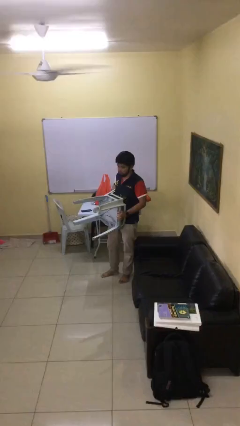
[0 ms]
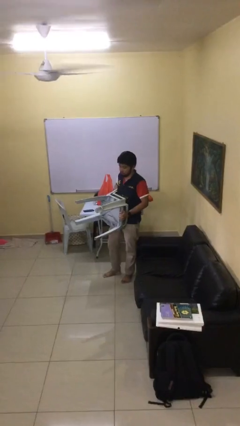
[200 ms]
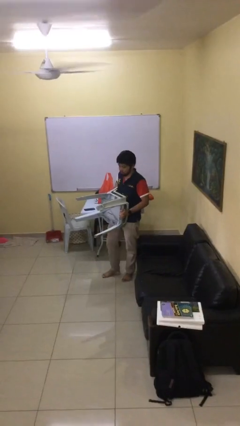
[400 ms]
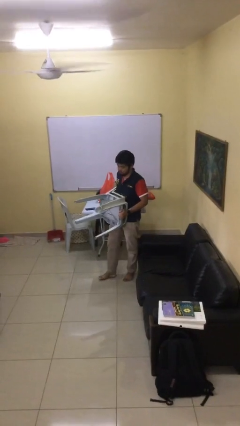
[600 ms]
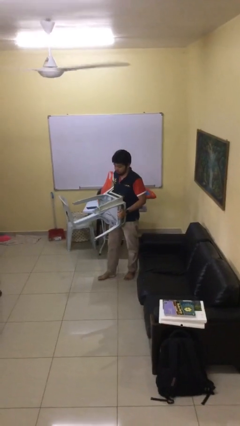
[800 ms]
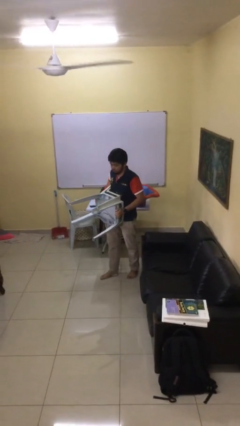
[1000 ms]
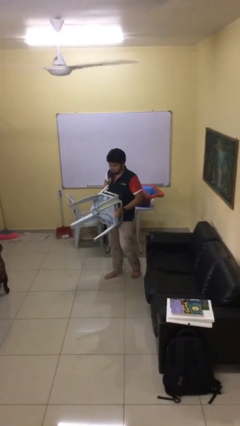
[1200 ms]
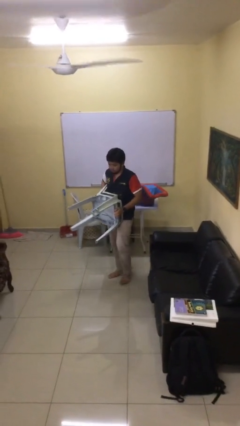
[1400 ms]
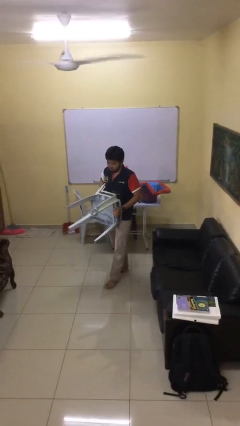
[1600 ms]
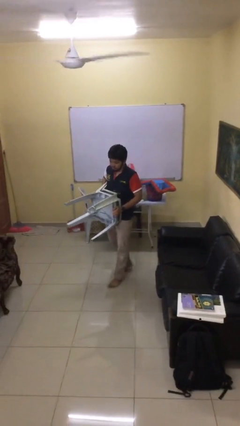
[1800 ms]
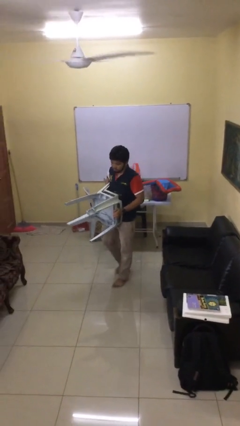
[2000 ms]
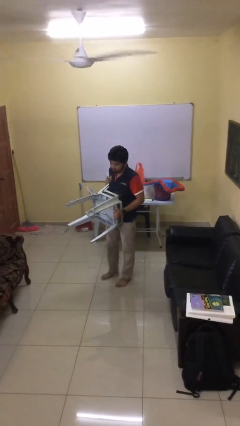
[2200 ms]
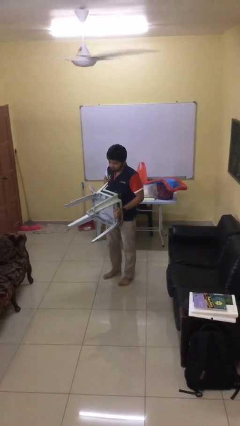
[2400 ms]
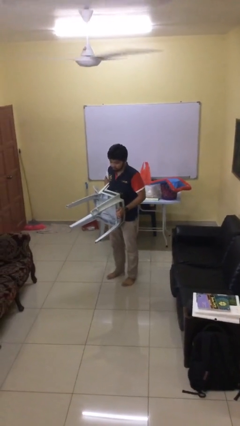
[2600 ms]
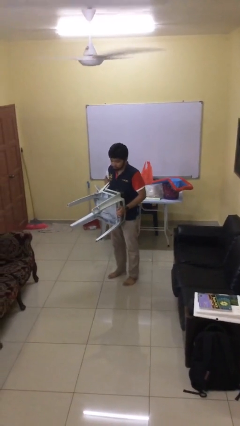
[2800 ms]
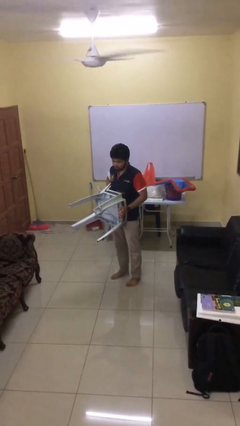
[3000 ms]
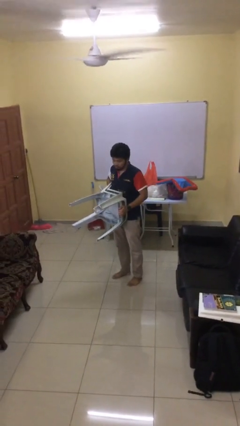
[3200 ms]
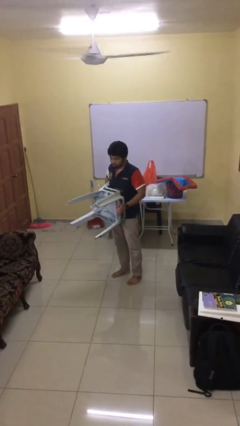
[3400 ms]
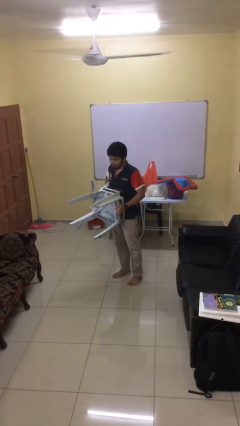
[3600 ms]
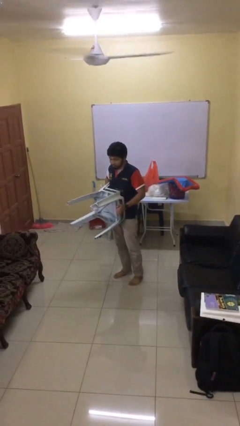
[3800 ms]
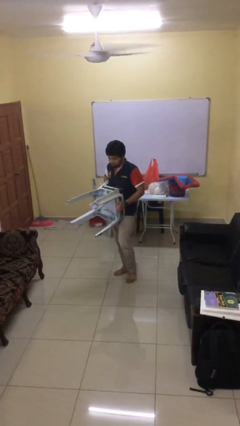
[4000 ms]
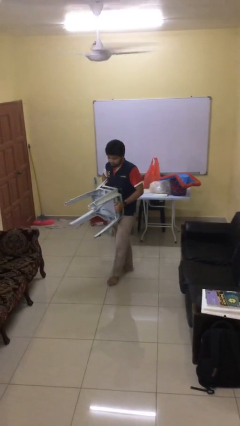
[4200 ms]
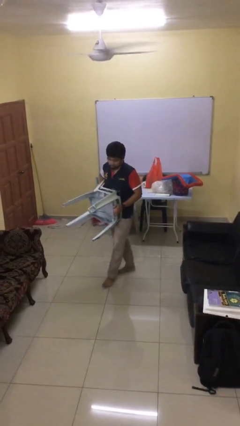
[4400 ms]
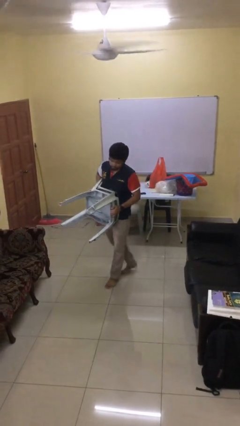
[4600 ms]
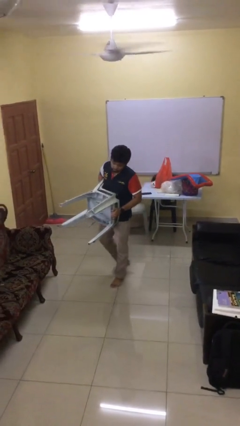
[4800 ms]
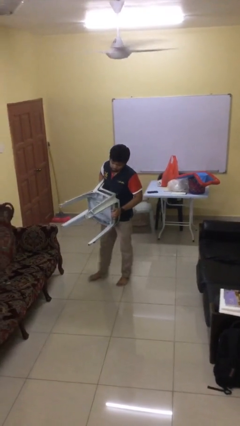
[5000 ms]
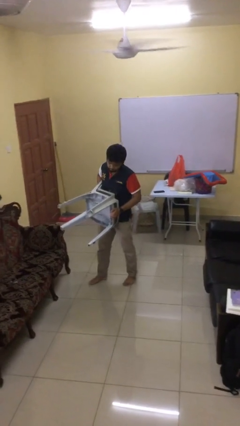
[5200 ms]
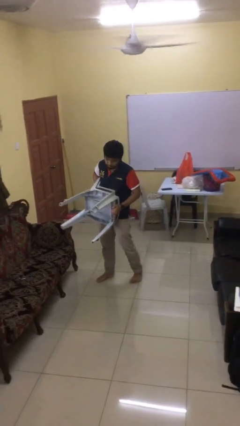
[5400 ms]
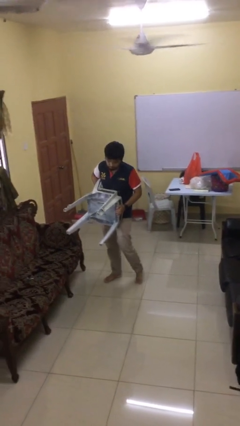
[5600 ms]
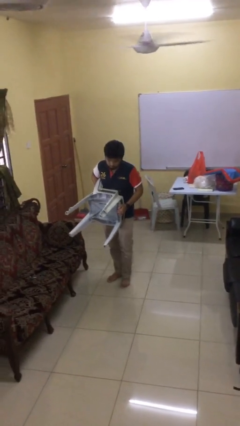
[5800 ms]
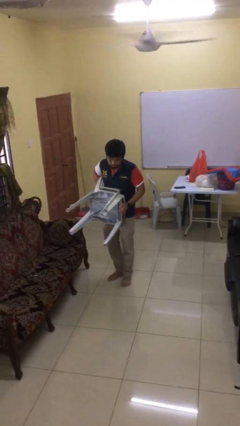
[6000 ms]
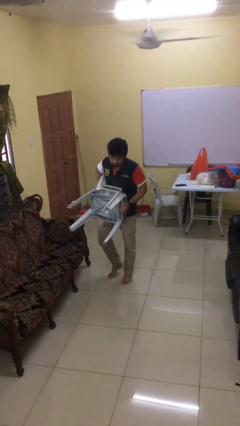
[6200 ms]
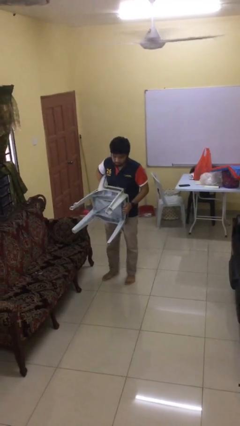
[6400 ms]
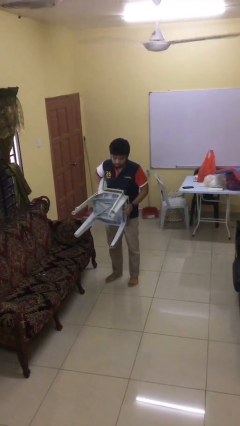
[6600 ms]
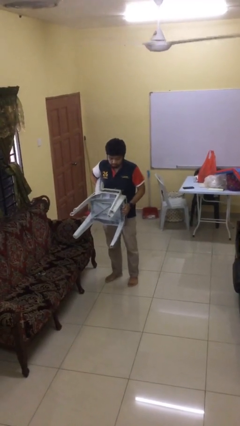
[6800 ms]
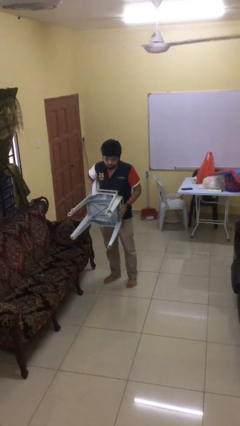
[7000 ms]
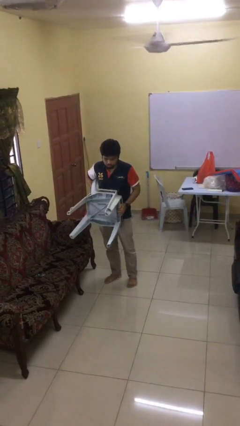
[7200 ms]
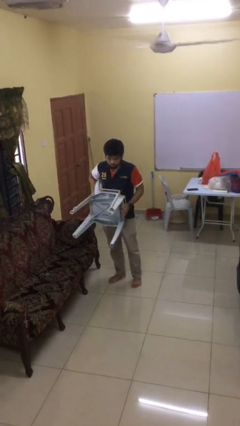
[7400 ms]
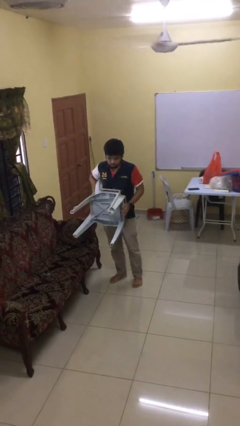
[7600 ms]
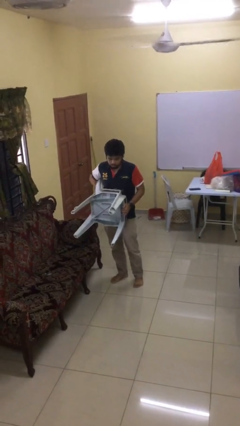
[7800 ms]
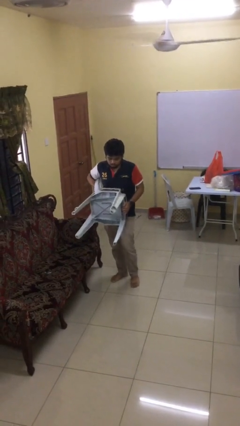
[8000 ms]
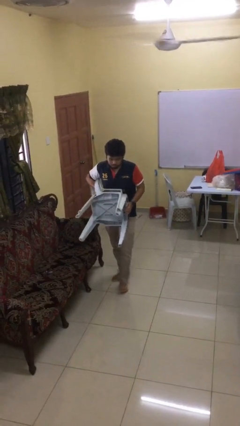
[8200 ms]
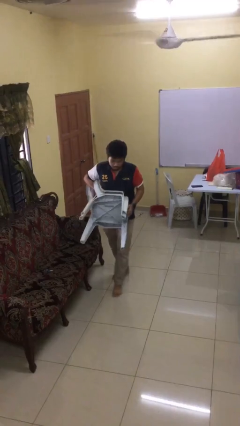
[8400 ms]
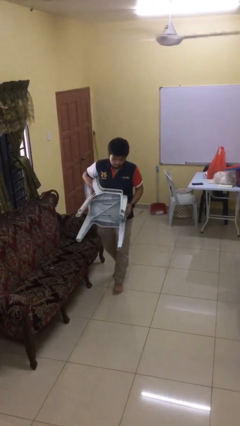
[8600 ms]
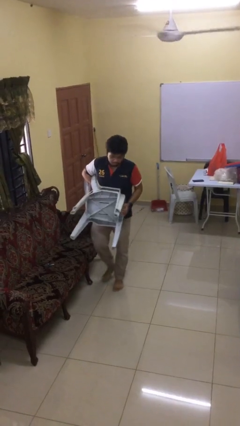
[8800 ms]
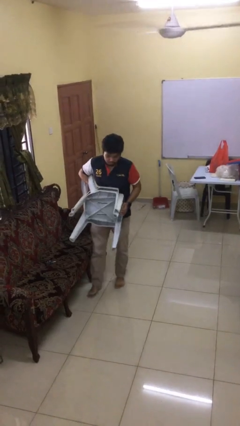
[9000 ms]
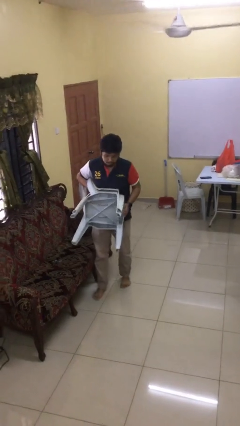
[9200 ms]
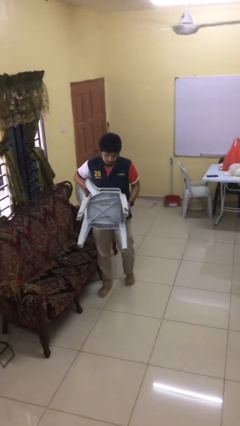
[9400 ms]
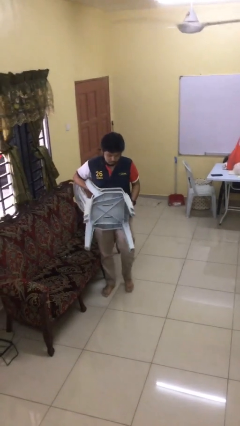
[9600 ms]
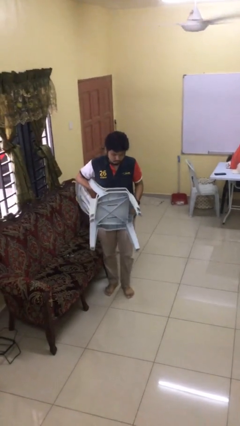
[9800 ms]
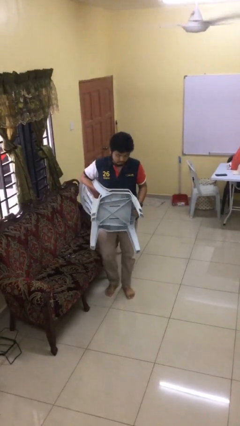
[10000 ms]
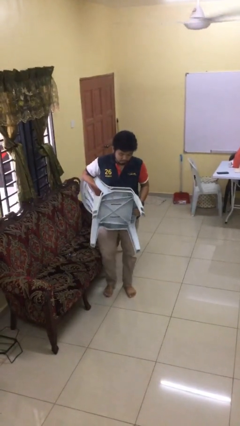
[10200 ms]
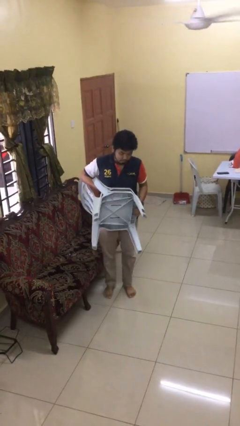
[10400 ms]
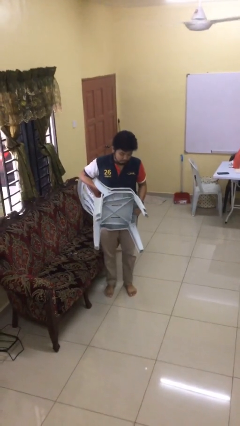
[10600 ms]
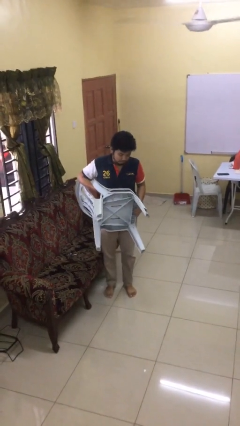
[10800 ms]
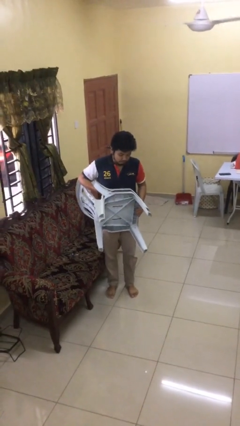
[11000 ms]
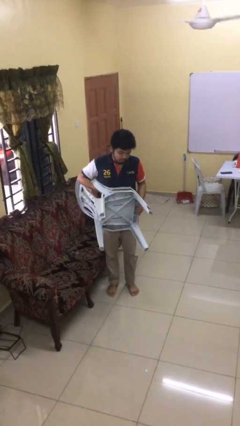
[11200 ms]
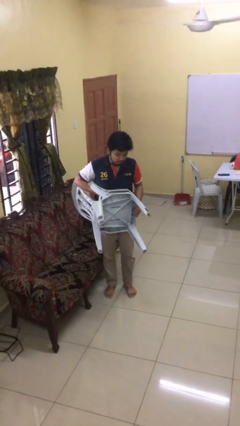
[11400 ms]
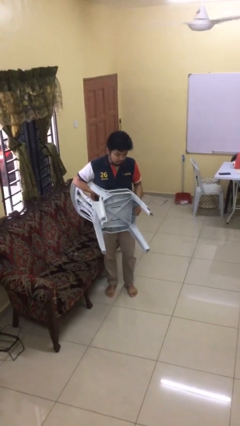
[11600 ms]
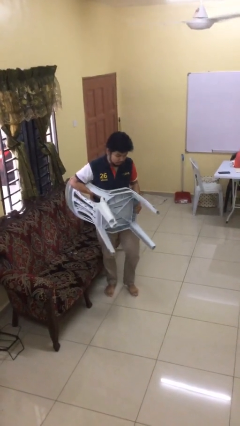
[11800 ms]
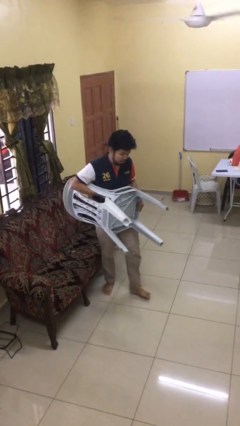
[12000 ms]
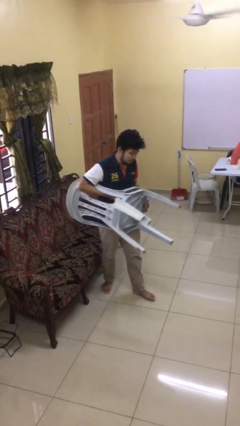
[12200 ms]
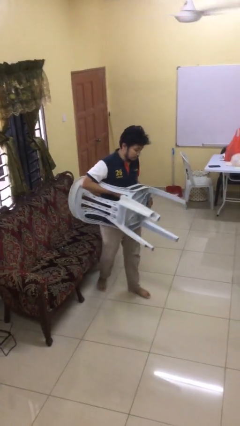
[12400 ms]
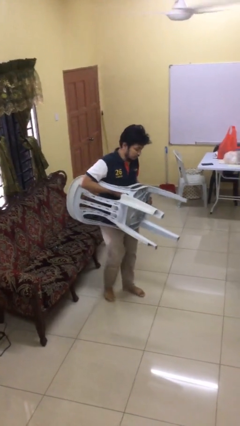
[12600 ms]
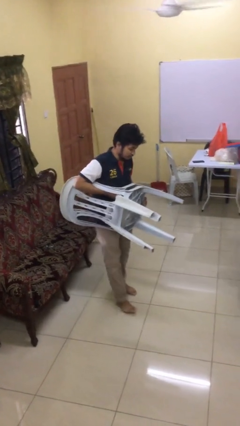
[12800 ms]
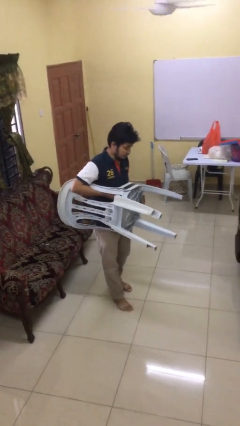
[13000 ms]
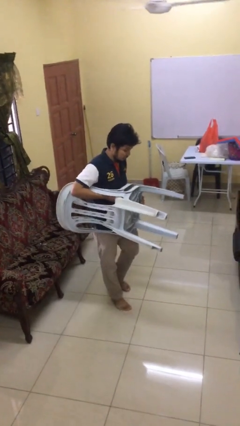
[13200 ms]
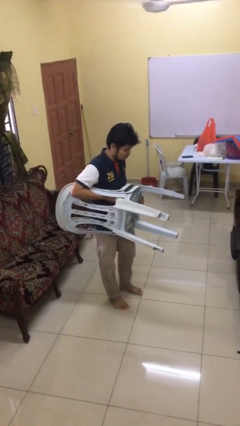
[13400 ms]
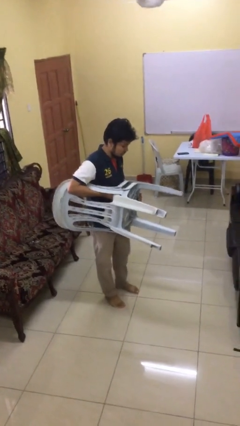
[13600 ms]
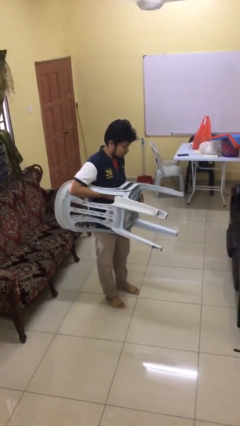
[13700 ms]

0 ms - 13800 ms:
person carries furniture

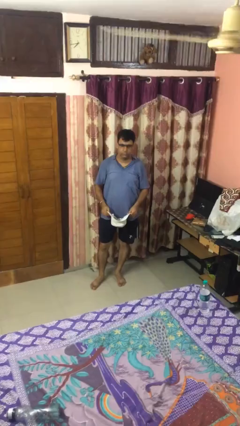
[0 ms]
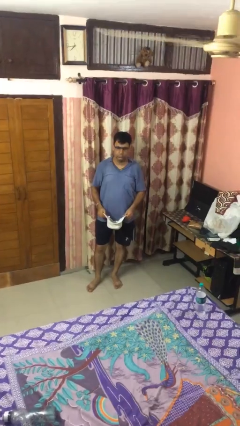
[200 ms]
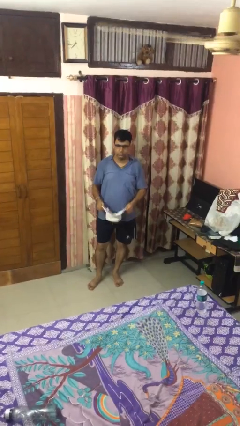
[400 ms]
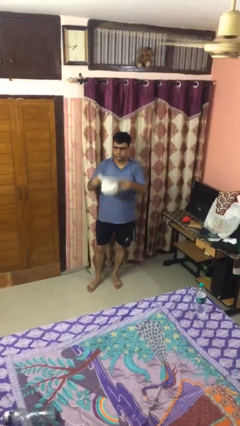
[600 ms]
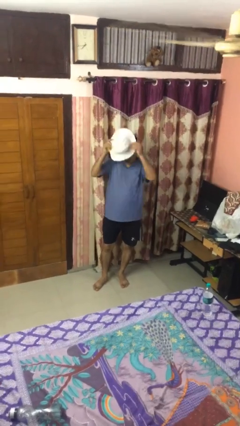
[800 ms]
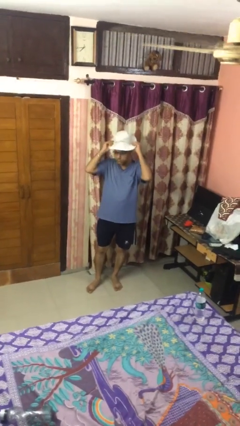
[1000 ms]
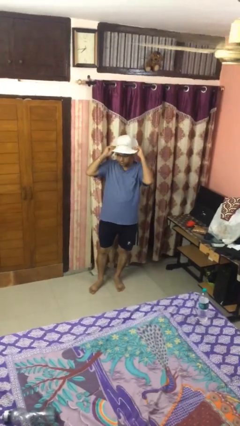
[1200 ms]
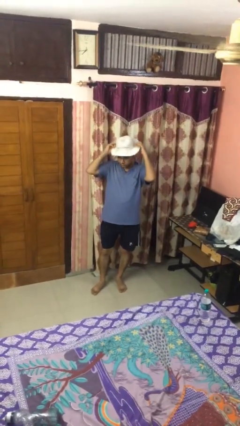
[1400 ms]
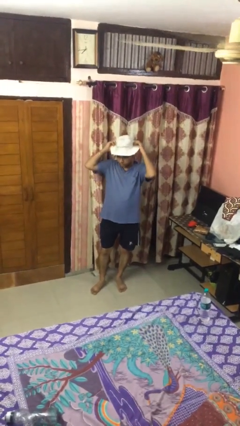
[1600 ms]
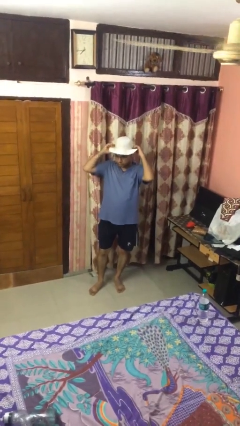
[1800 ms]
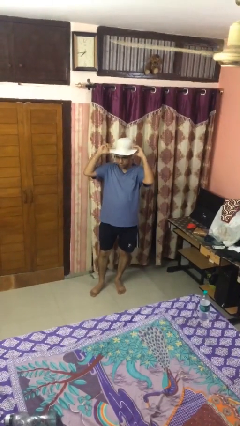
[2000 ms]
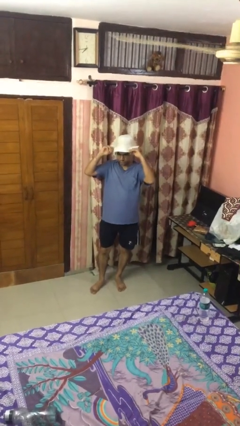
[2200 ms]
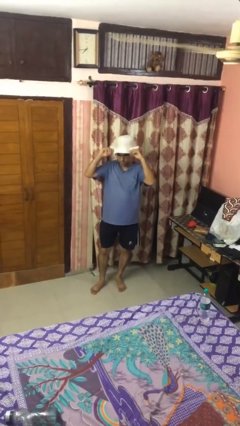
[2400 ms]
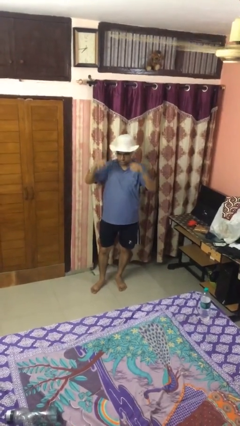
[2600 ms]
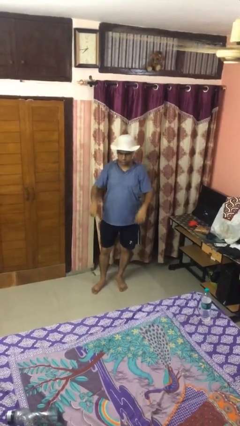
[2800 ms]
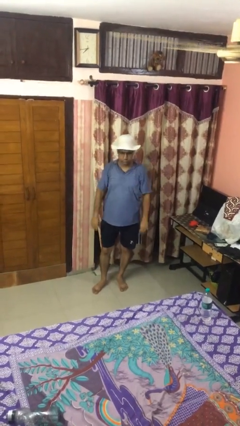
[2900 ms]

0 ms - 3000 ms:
person puts on hat

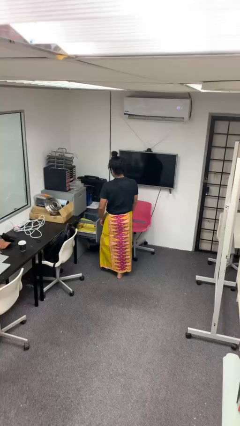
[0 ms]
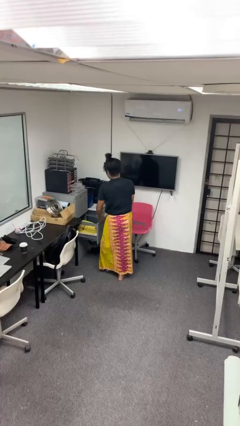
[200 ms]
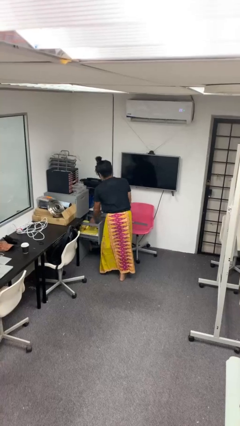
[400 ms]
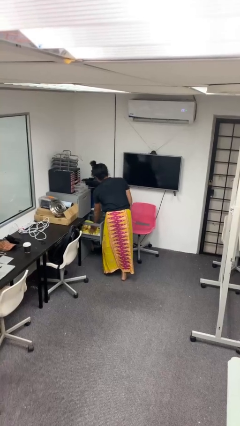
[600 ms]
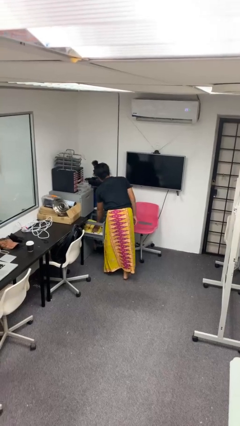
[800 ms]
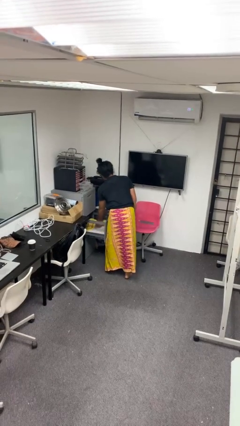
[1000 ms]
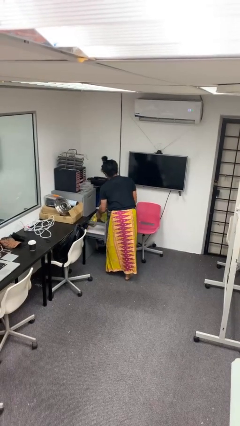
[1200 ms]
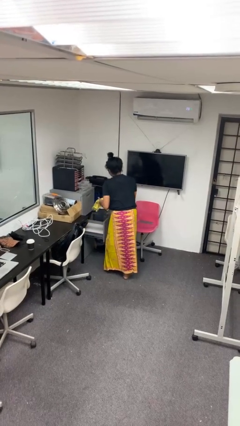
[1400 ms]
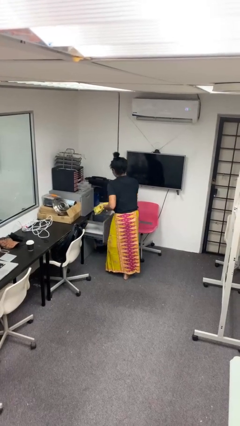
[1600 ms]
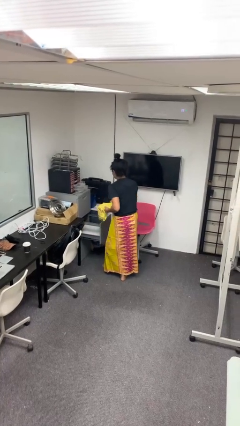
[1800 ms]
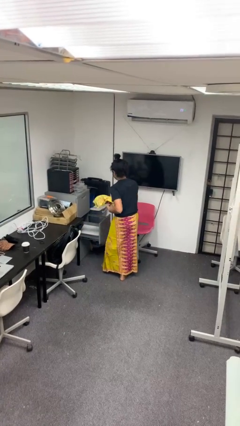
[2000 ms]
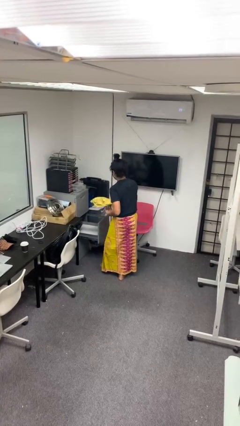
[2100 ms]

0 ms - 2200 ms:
person takes clothes from dresser
